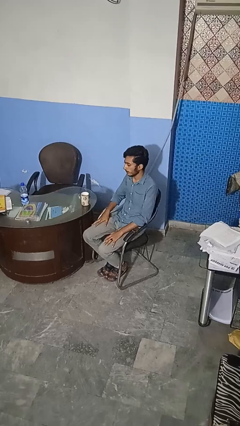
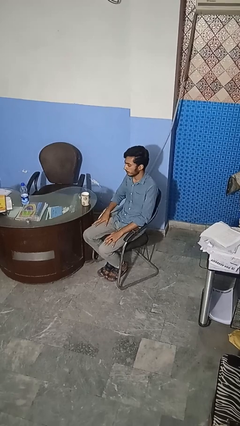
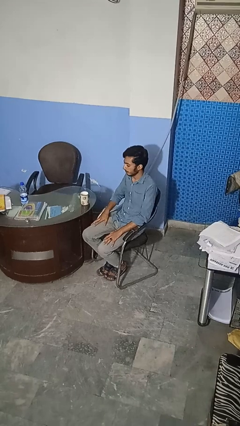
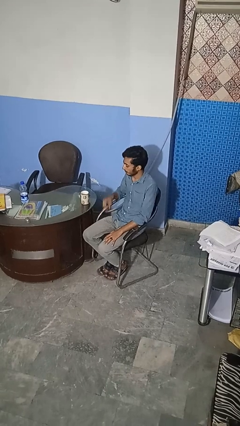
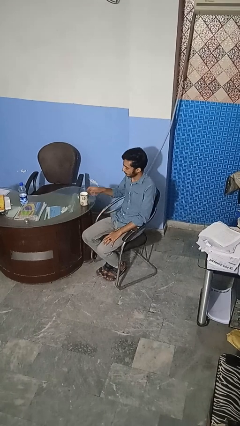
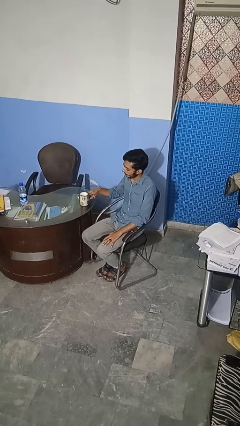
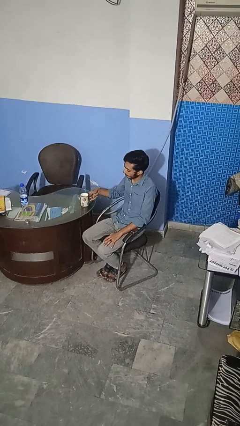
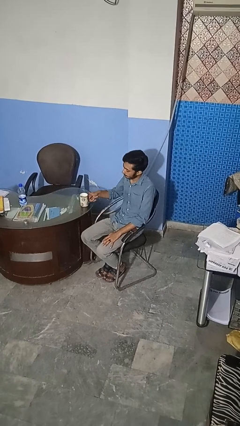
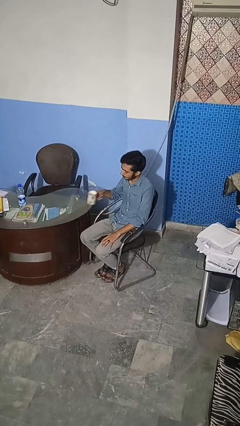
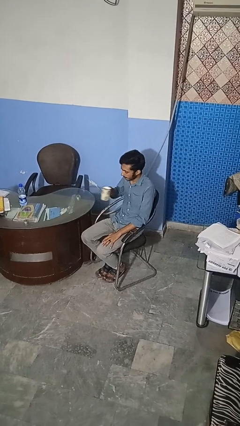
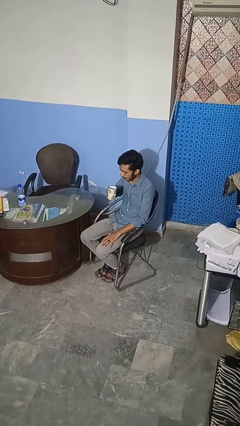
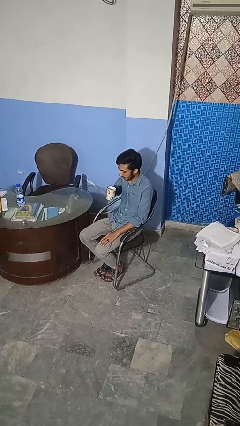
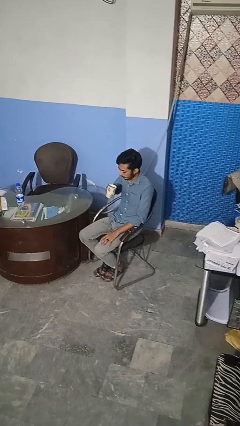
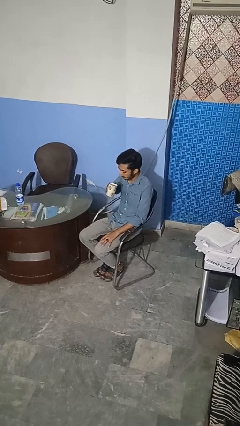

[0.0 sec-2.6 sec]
person picks up object from table

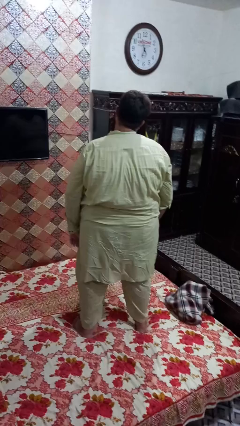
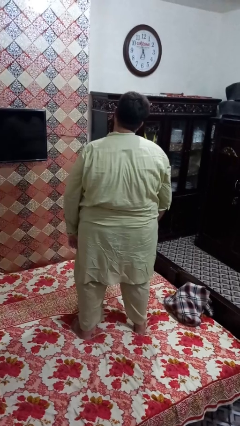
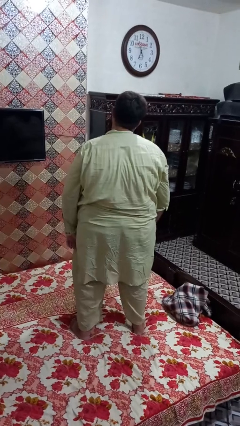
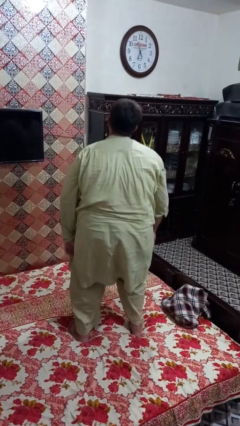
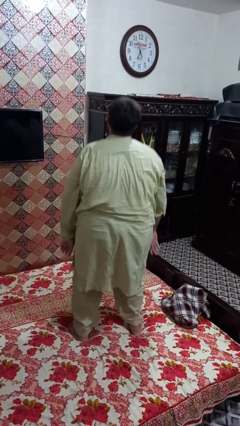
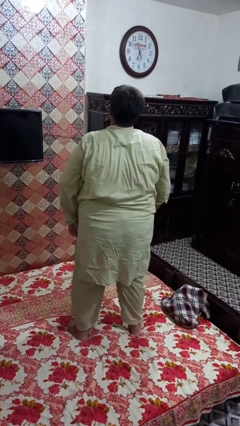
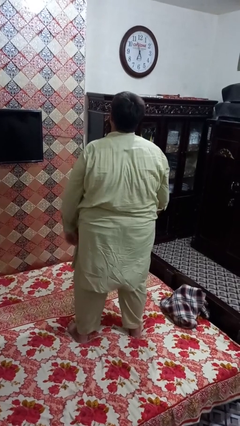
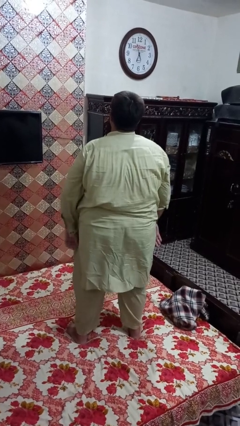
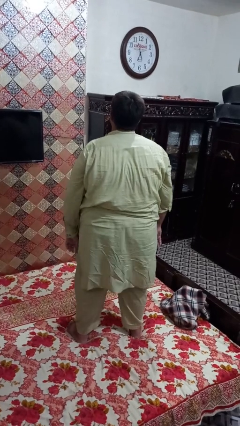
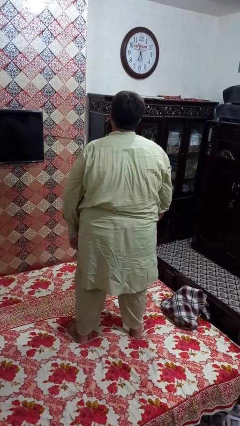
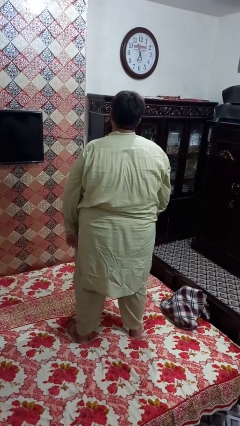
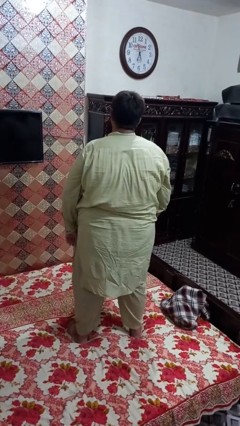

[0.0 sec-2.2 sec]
person jumps on bed

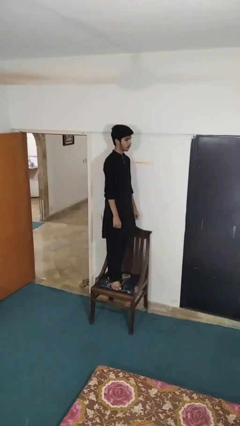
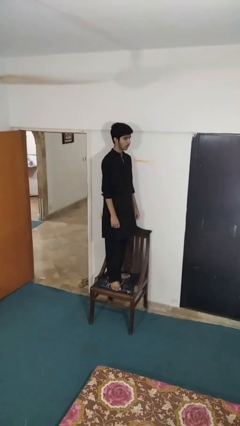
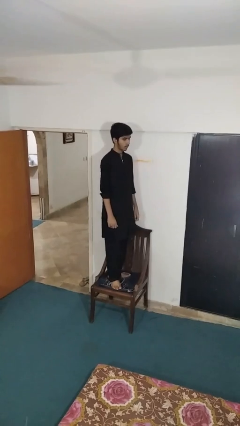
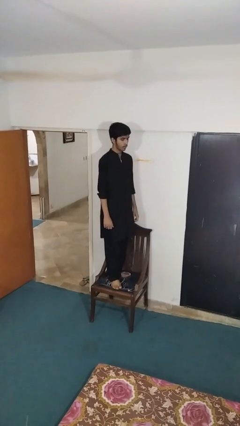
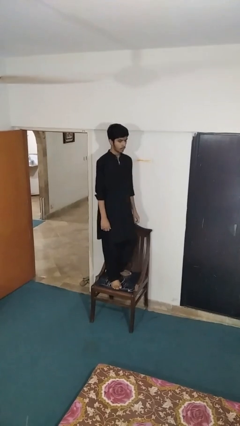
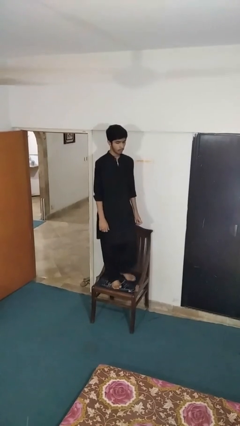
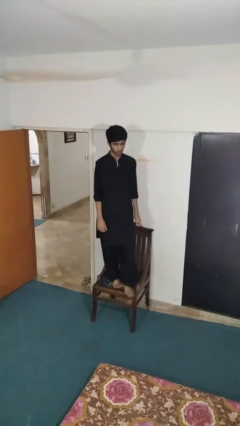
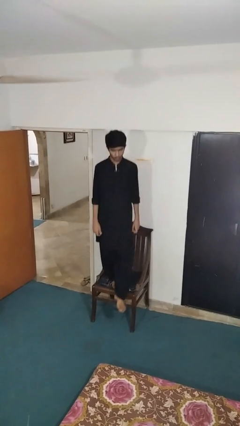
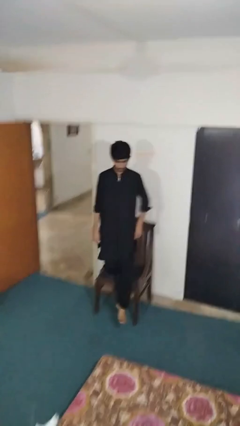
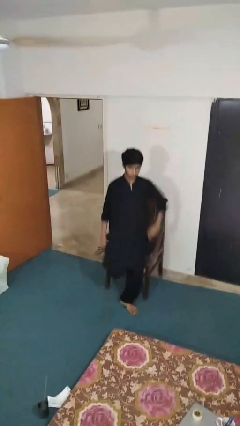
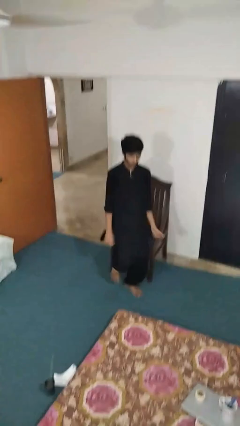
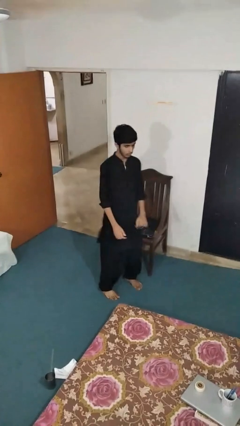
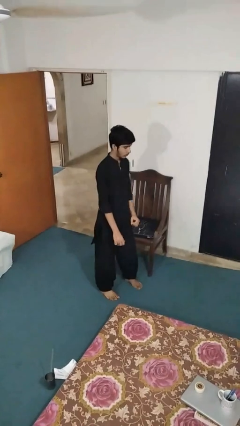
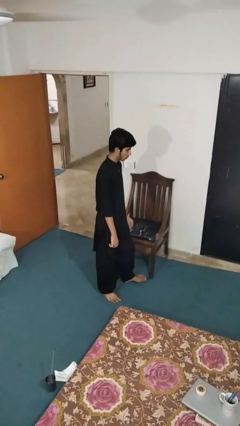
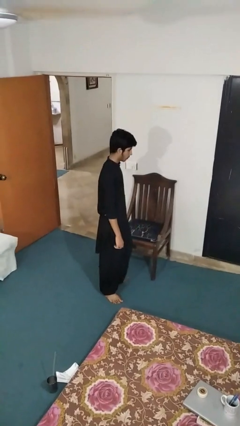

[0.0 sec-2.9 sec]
person climbs off chair

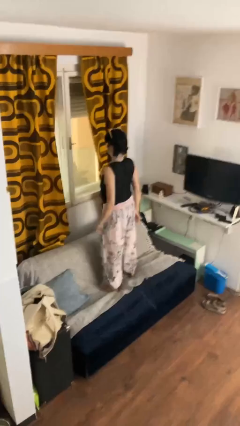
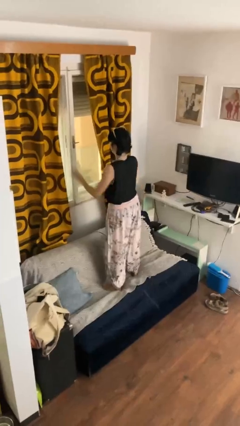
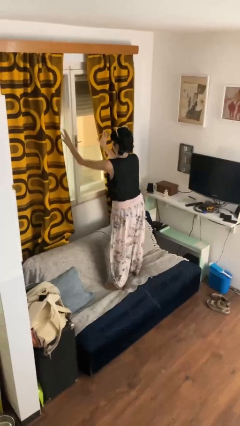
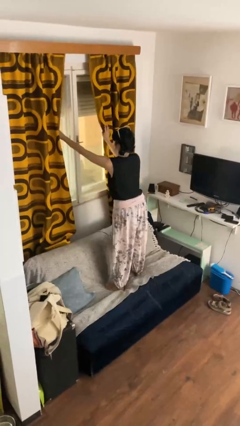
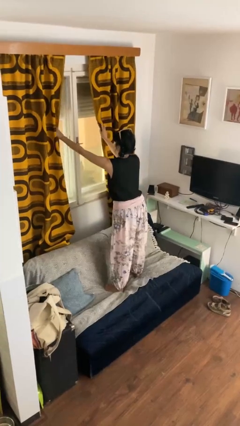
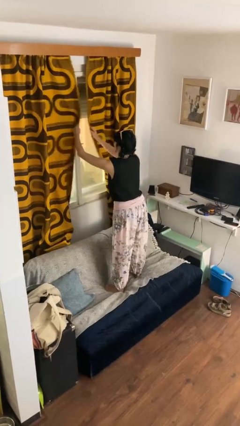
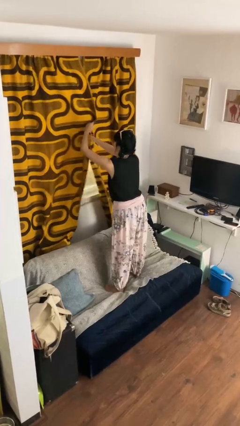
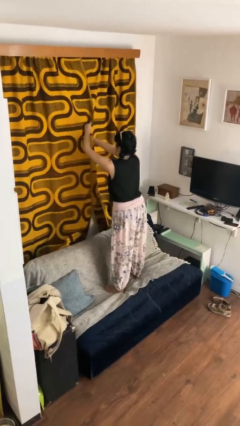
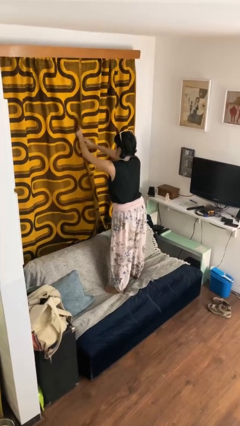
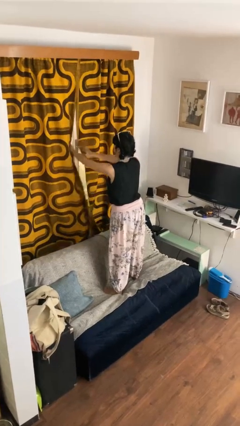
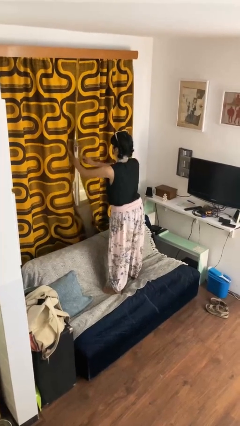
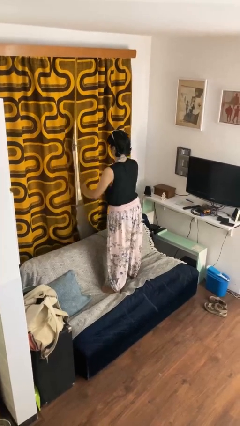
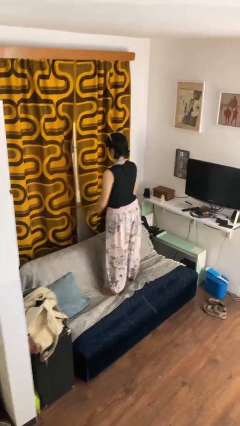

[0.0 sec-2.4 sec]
person closes curtains

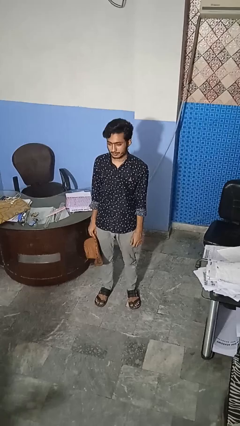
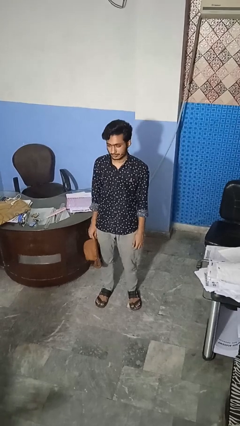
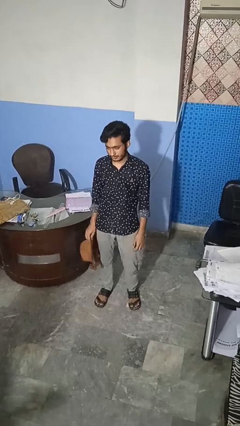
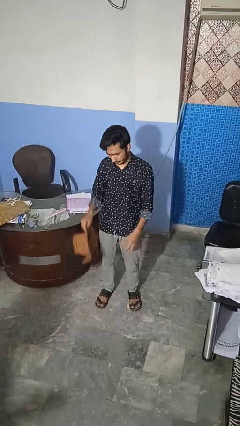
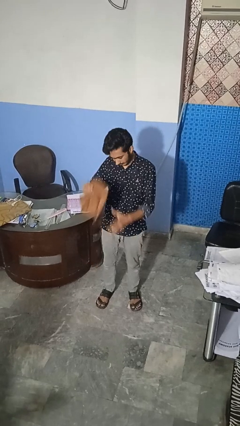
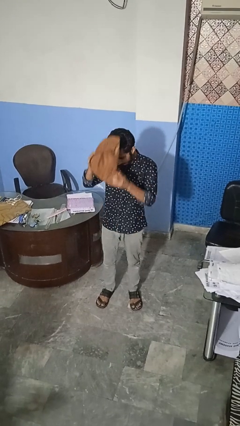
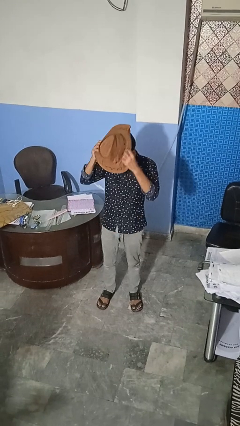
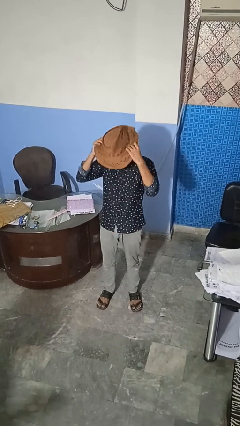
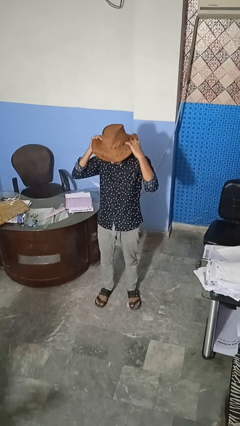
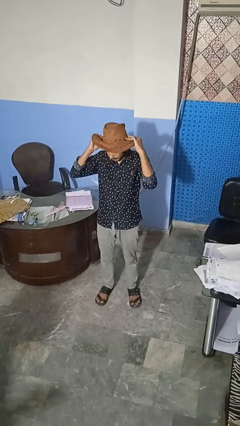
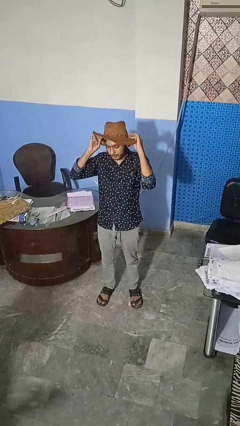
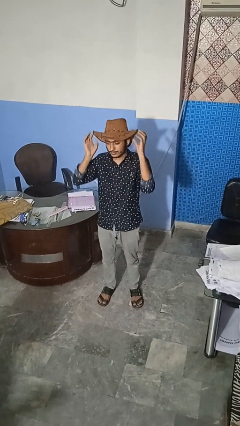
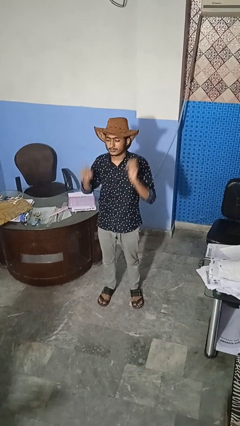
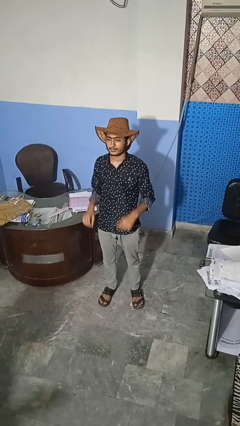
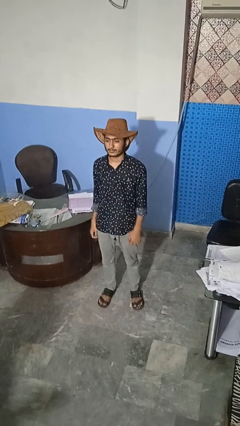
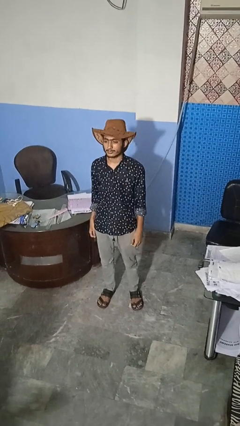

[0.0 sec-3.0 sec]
person puts on hat

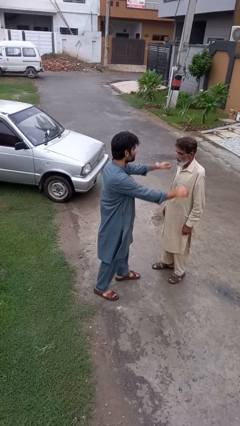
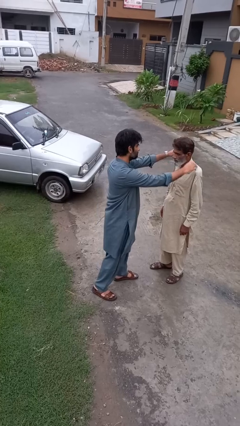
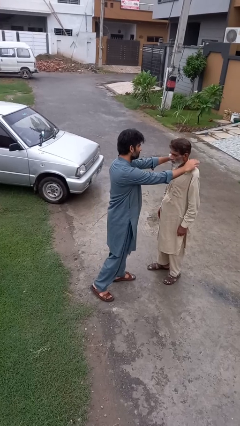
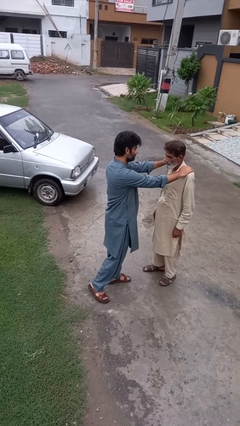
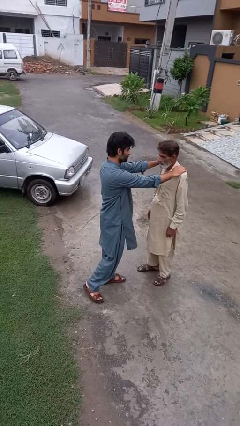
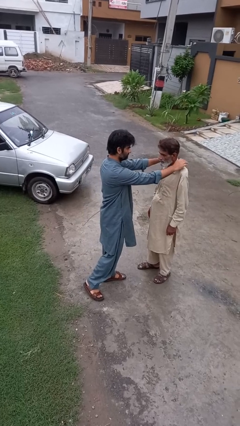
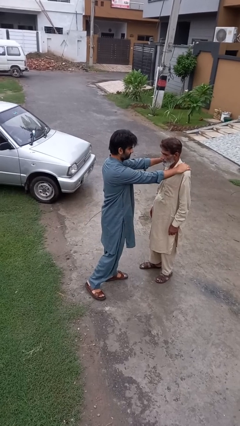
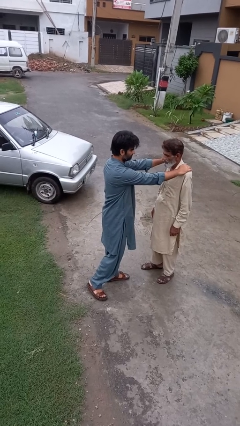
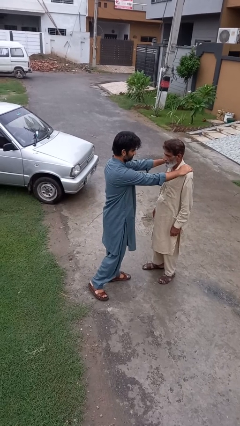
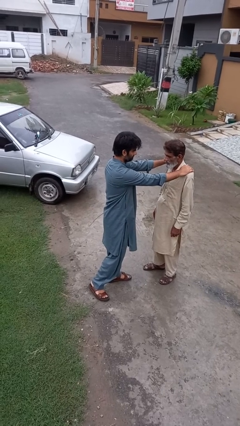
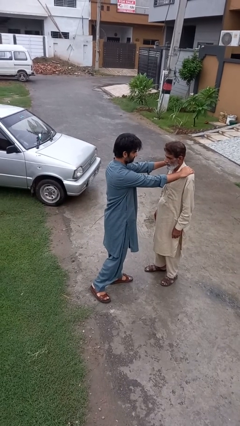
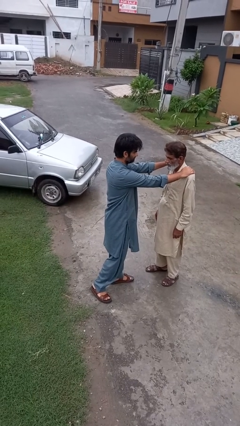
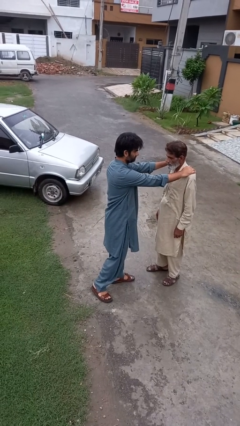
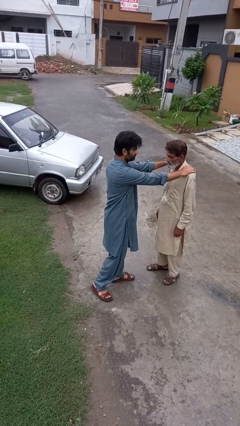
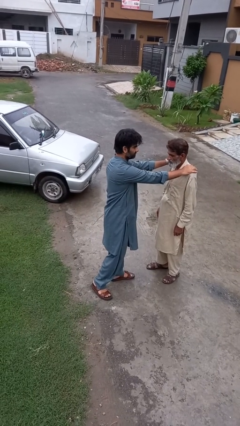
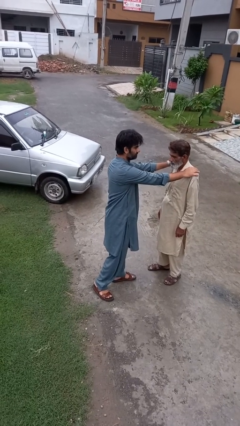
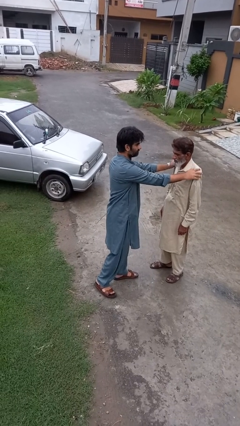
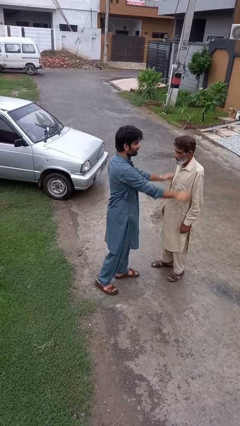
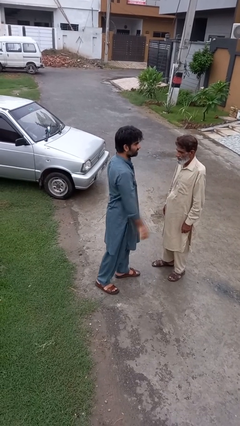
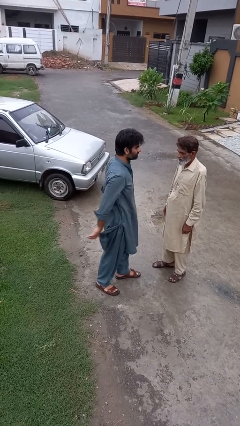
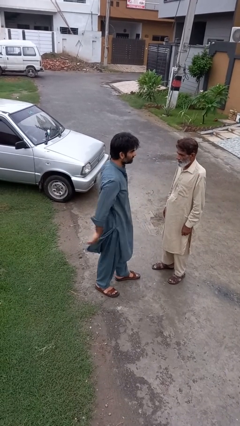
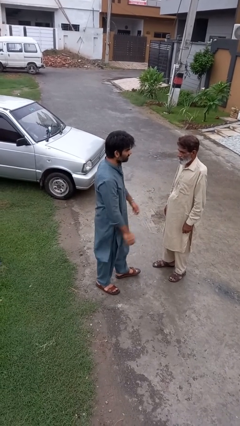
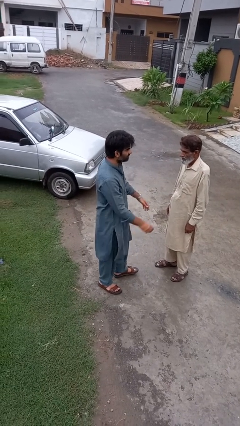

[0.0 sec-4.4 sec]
person pounds shoulders of person
